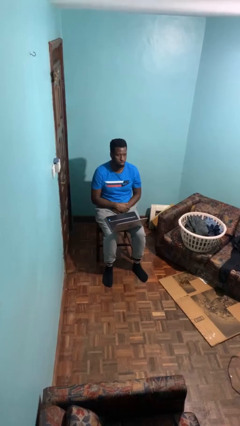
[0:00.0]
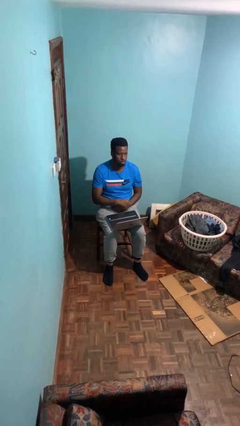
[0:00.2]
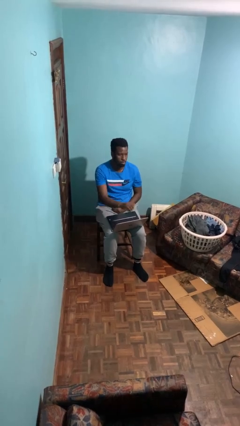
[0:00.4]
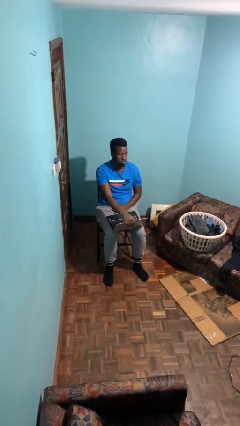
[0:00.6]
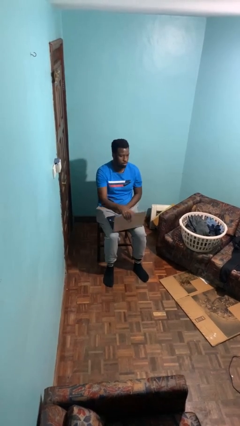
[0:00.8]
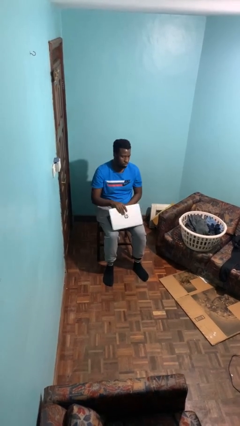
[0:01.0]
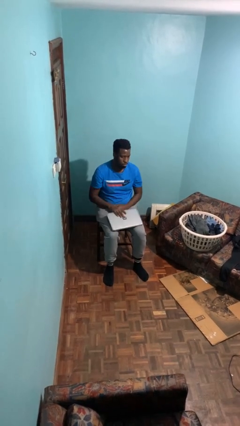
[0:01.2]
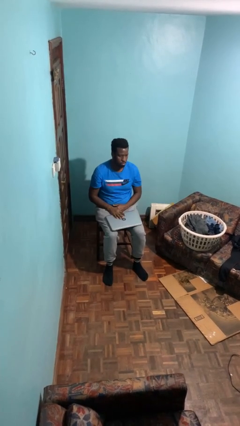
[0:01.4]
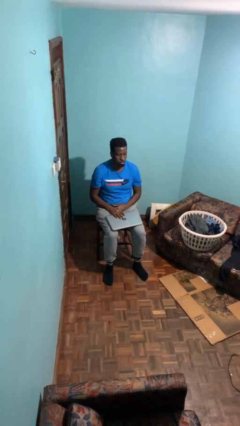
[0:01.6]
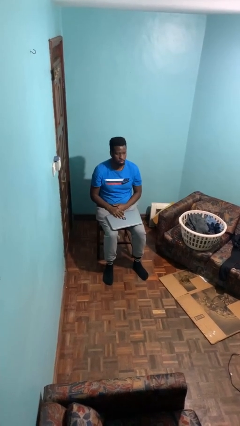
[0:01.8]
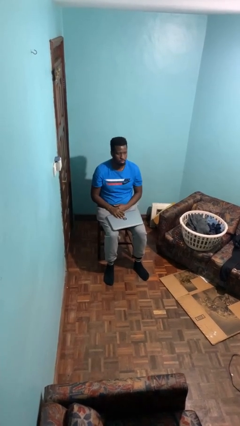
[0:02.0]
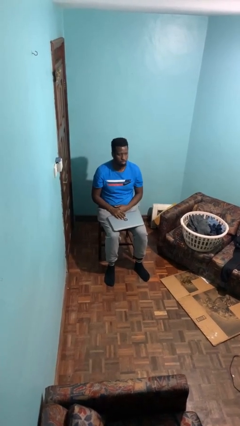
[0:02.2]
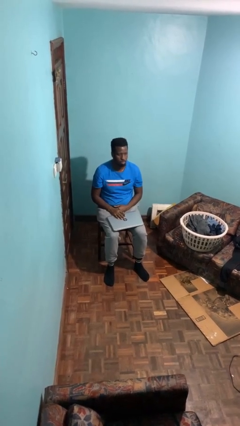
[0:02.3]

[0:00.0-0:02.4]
person closes laptop

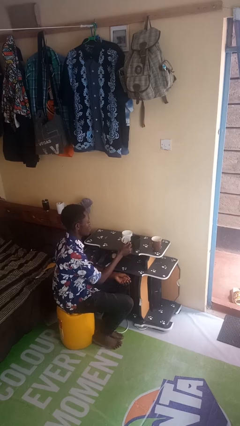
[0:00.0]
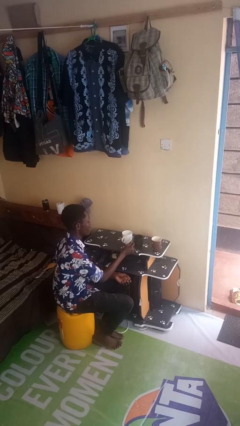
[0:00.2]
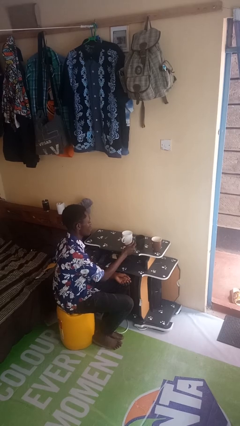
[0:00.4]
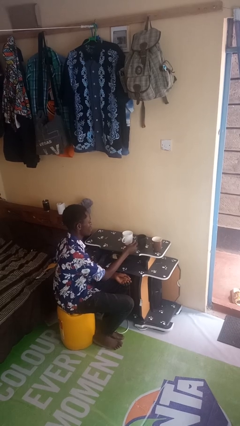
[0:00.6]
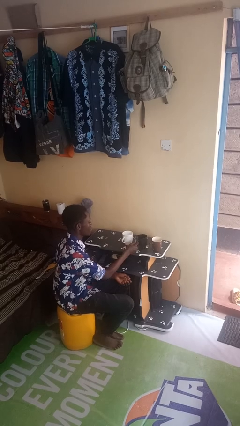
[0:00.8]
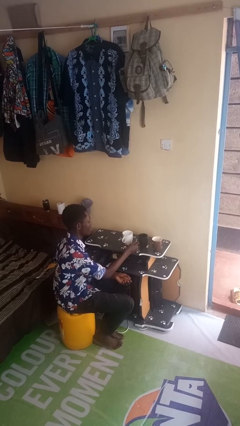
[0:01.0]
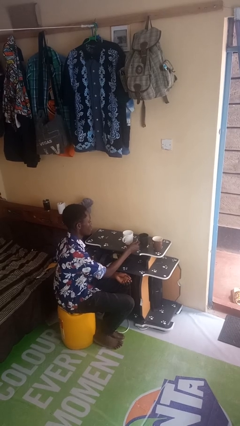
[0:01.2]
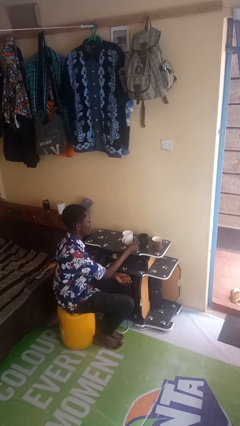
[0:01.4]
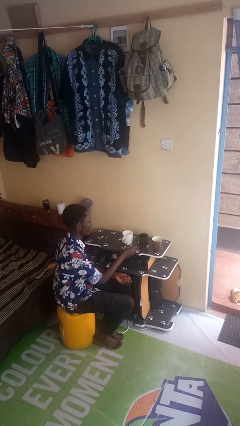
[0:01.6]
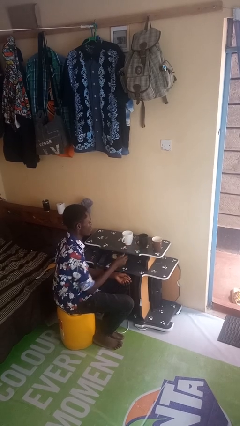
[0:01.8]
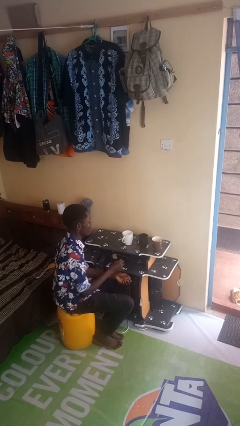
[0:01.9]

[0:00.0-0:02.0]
person puts down object on table

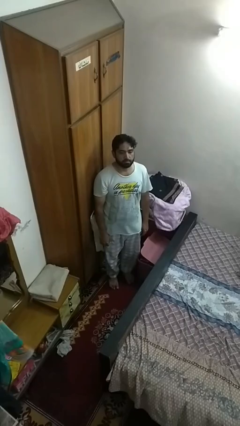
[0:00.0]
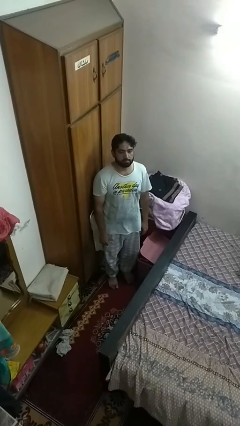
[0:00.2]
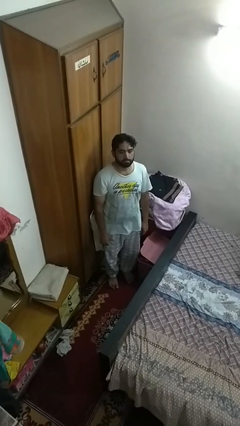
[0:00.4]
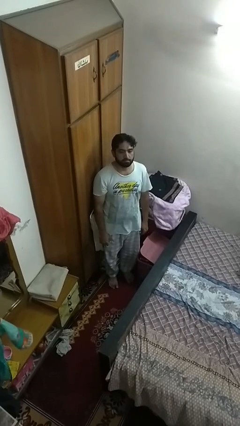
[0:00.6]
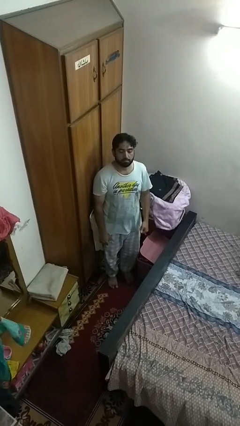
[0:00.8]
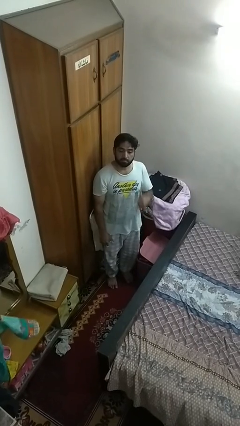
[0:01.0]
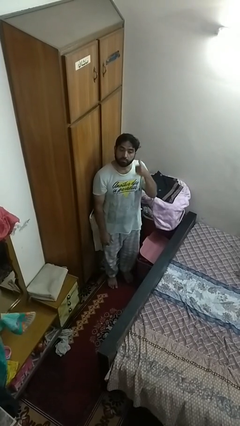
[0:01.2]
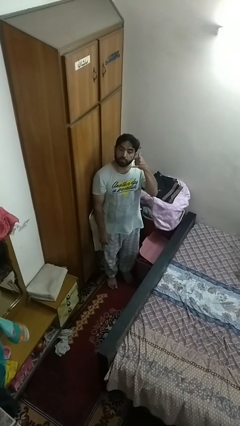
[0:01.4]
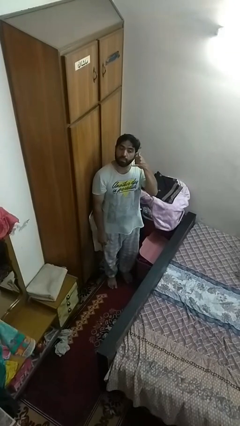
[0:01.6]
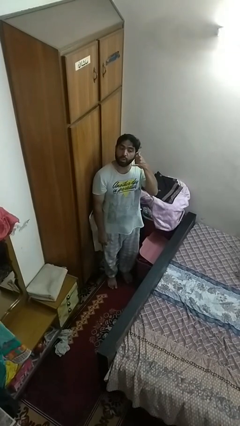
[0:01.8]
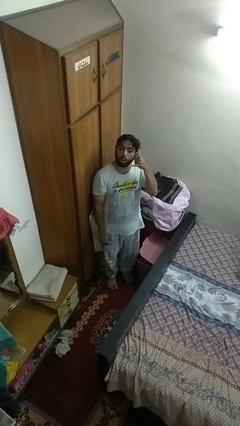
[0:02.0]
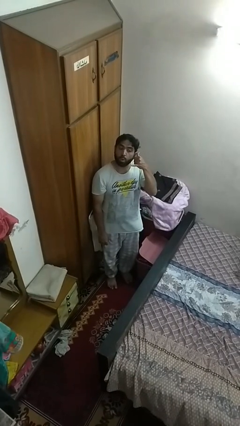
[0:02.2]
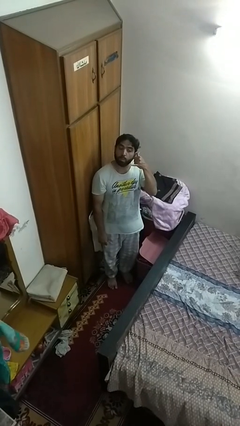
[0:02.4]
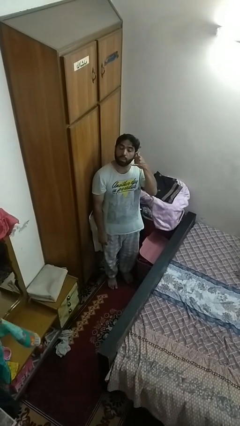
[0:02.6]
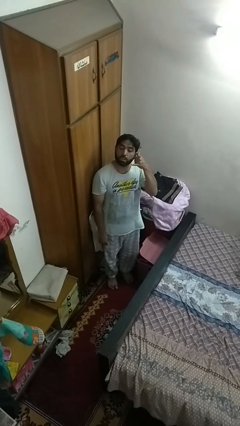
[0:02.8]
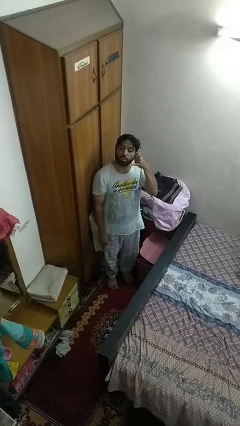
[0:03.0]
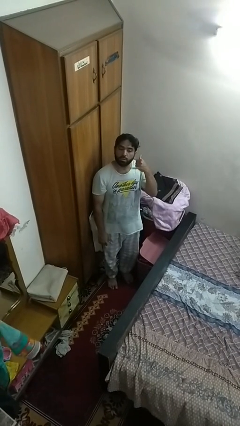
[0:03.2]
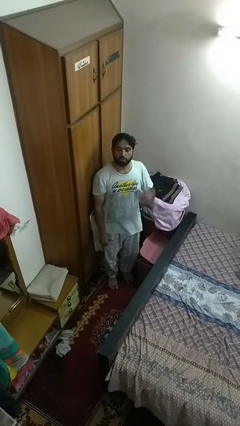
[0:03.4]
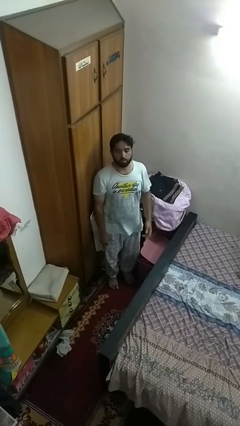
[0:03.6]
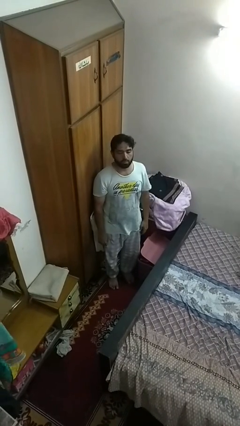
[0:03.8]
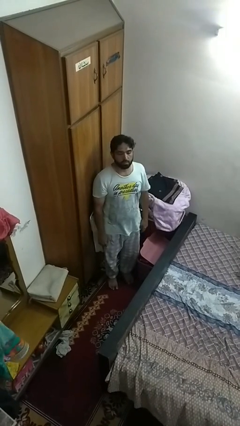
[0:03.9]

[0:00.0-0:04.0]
person gestures call me

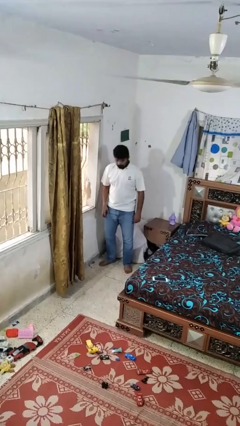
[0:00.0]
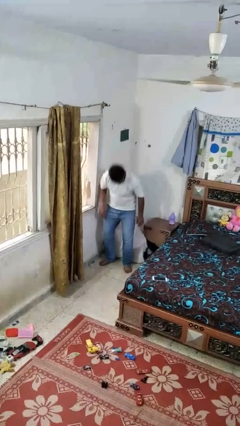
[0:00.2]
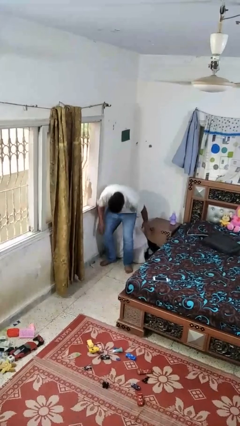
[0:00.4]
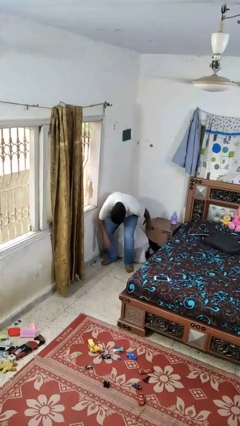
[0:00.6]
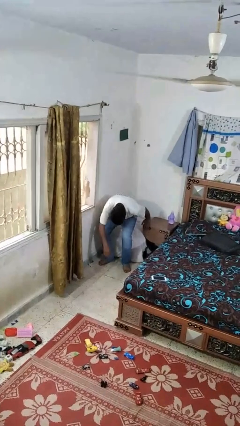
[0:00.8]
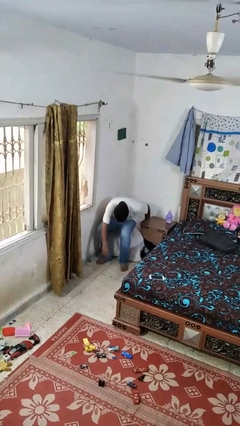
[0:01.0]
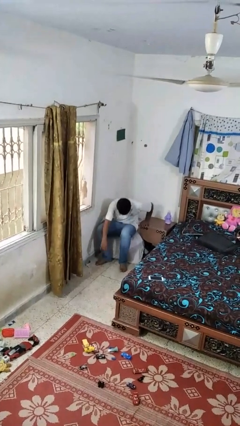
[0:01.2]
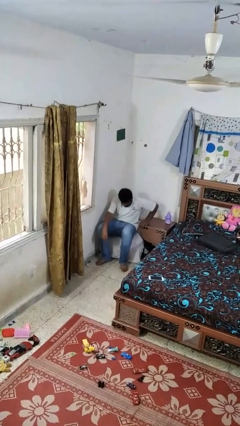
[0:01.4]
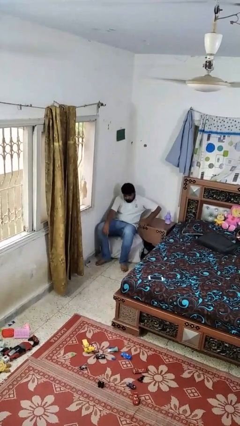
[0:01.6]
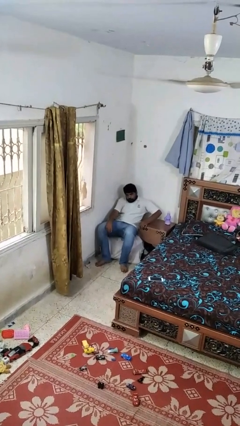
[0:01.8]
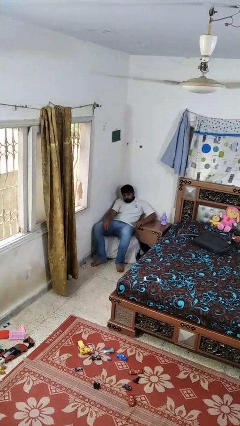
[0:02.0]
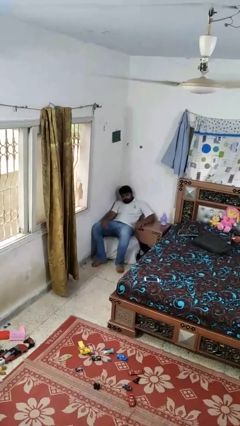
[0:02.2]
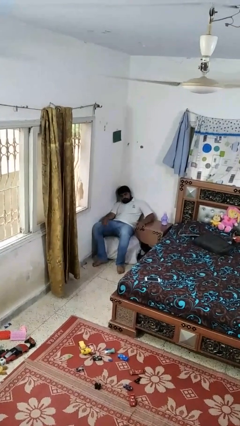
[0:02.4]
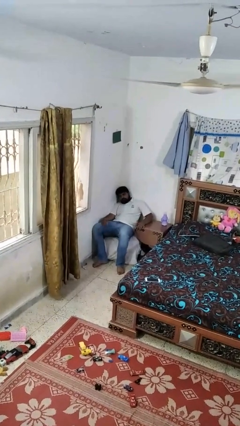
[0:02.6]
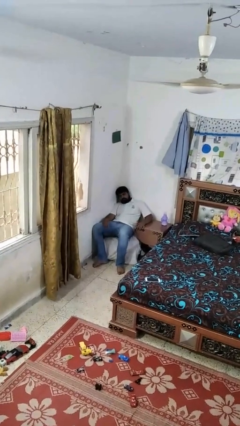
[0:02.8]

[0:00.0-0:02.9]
person lies down on couch

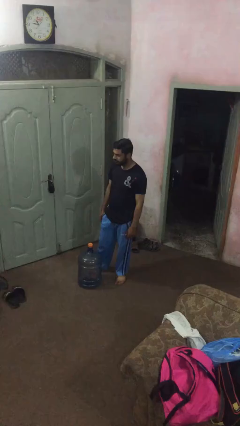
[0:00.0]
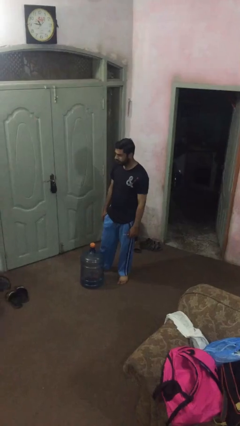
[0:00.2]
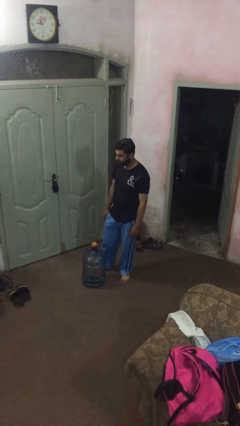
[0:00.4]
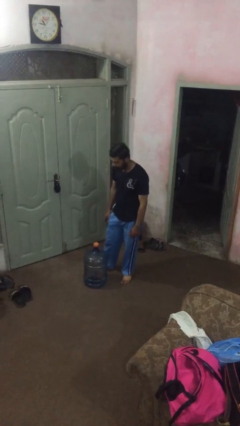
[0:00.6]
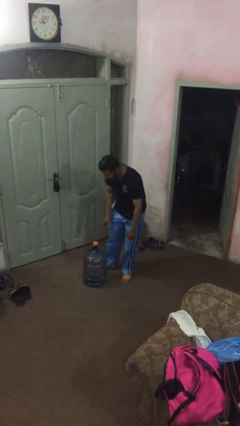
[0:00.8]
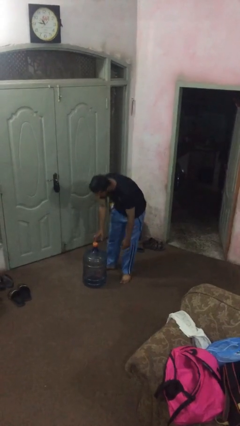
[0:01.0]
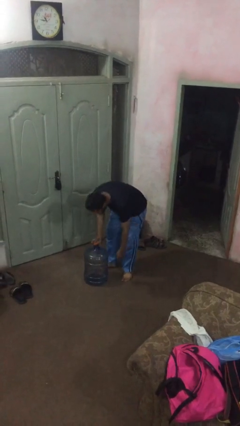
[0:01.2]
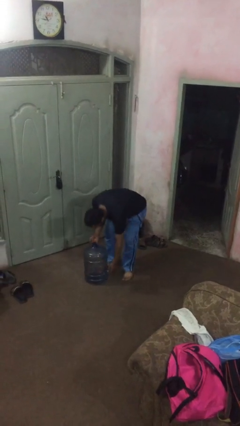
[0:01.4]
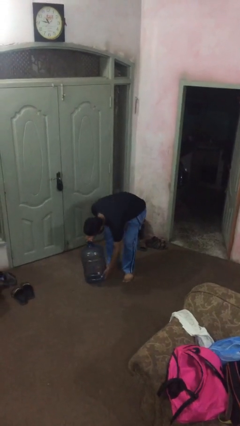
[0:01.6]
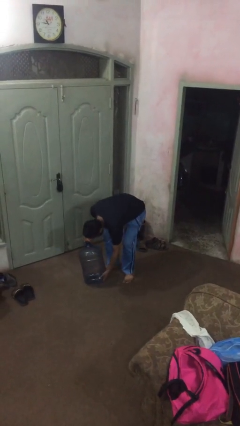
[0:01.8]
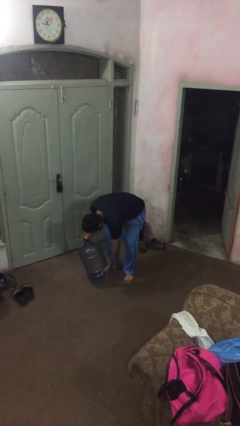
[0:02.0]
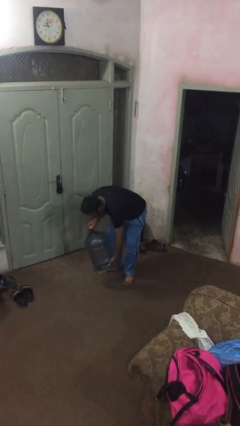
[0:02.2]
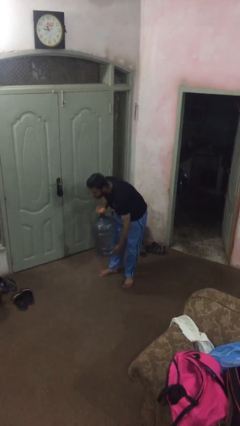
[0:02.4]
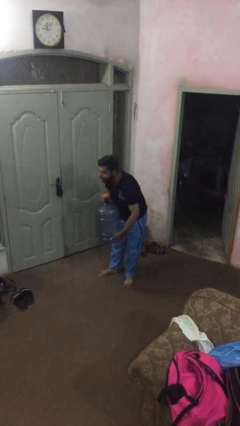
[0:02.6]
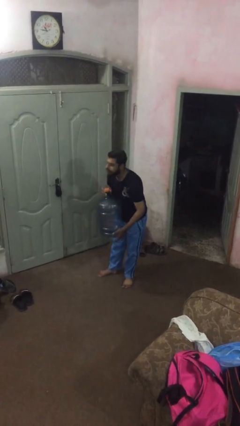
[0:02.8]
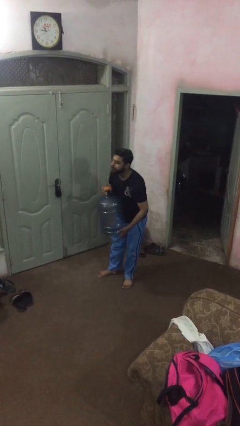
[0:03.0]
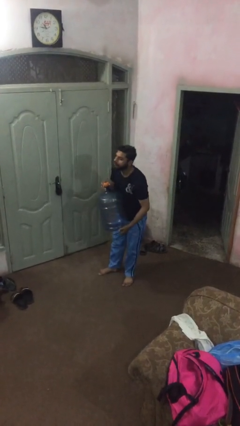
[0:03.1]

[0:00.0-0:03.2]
person picks up object from floor

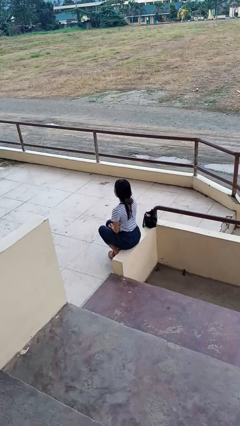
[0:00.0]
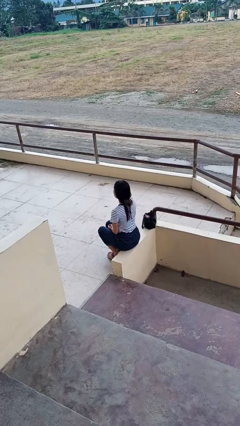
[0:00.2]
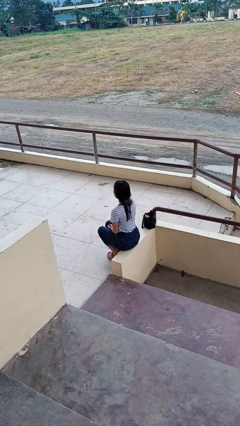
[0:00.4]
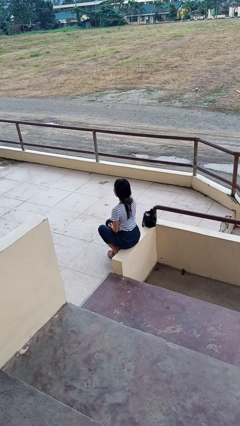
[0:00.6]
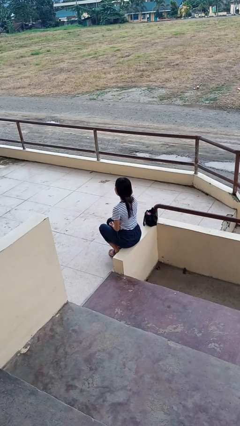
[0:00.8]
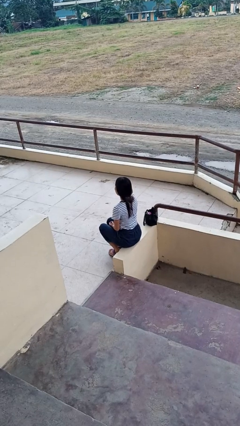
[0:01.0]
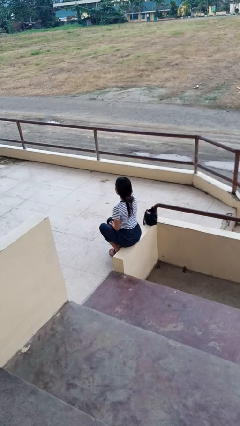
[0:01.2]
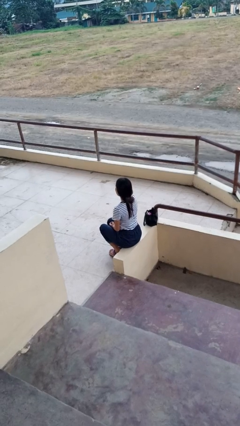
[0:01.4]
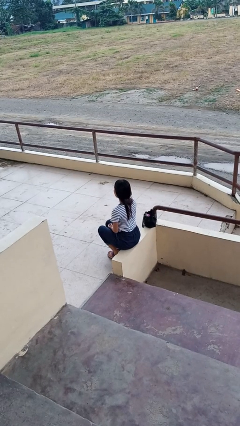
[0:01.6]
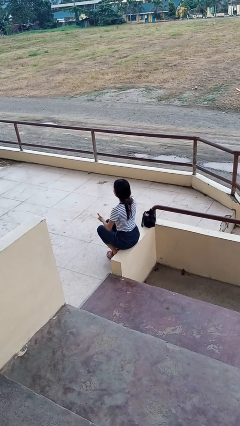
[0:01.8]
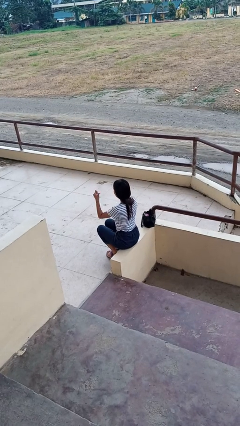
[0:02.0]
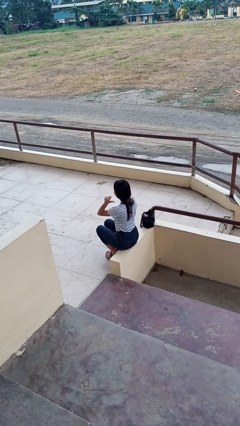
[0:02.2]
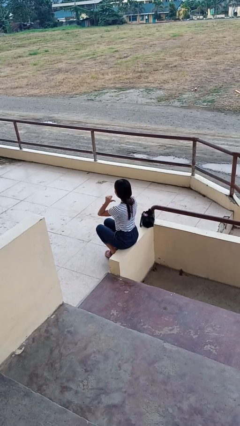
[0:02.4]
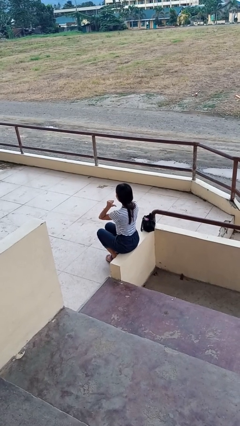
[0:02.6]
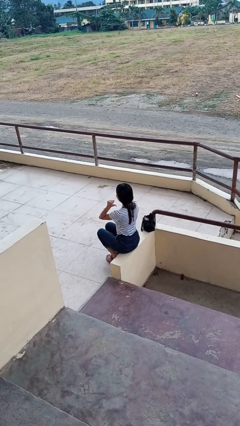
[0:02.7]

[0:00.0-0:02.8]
person gestures behind me

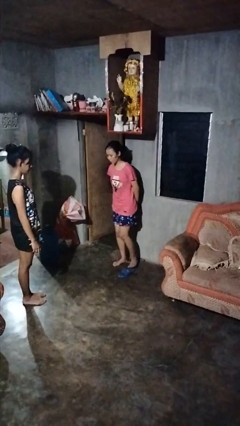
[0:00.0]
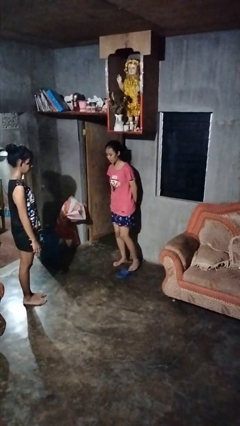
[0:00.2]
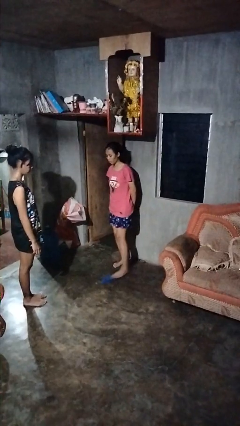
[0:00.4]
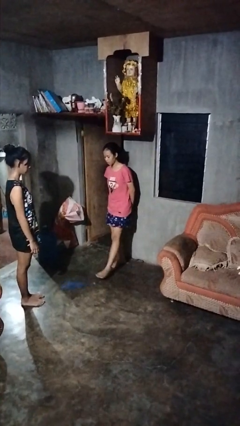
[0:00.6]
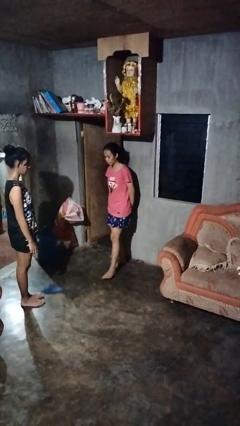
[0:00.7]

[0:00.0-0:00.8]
person kicks object to person
